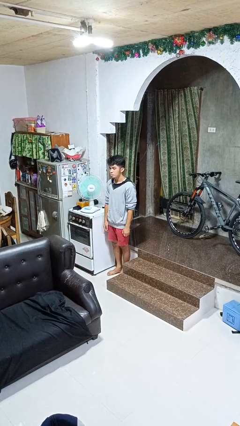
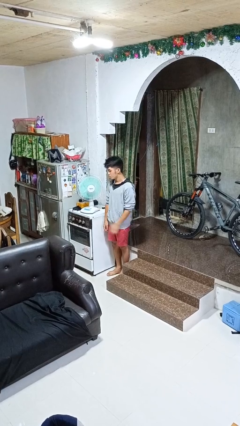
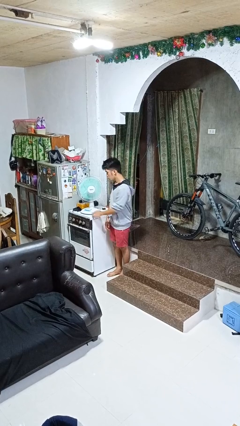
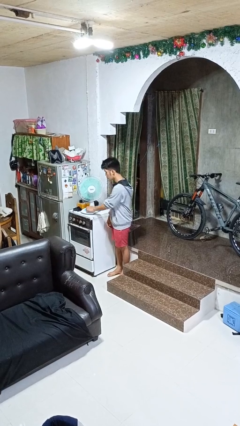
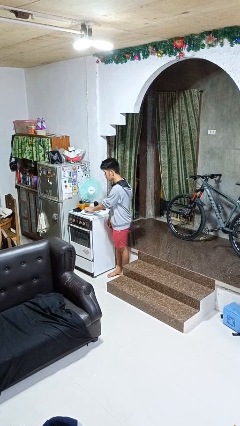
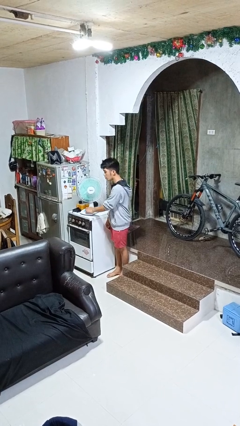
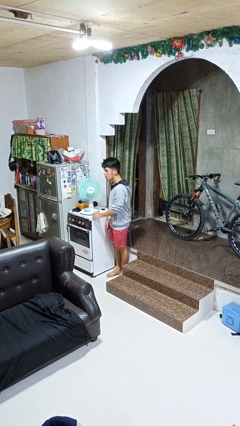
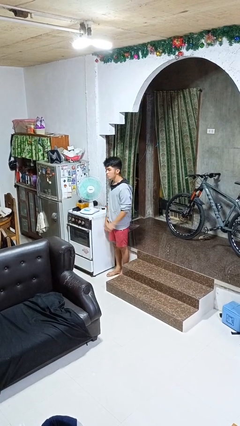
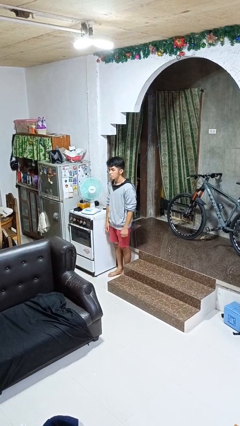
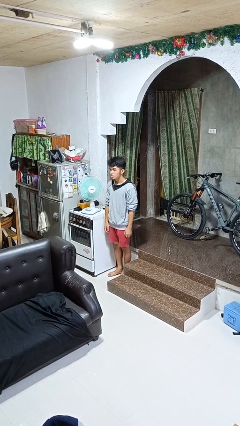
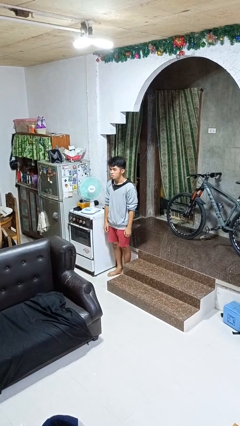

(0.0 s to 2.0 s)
person turns off fan

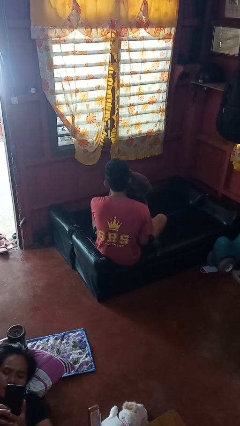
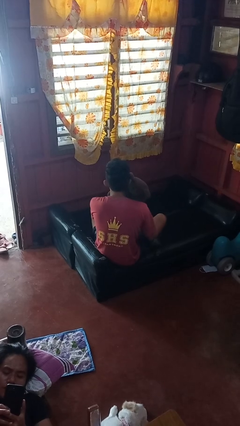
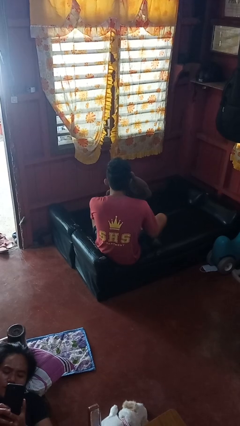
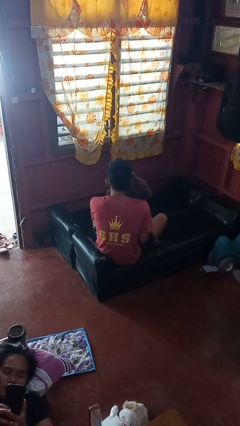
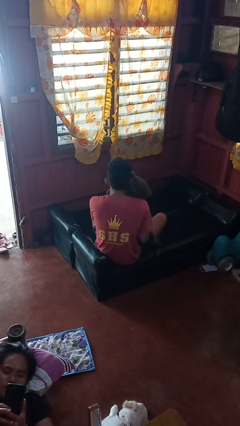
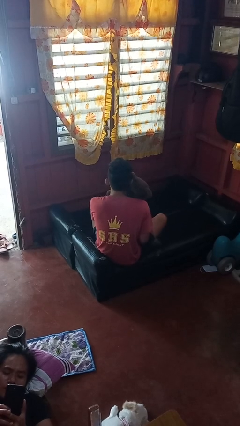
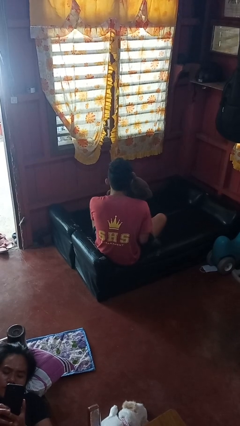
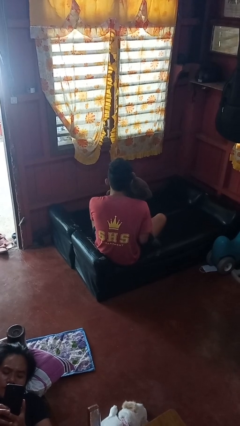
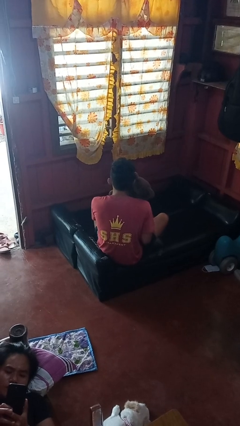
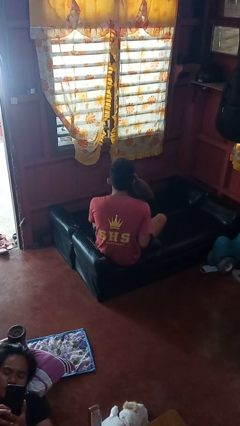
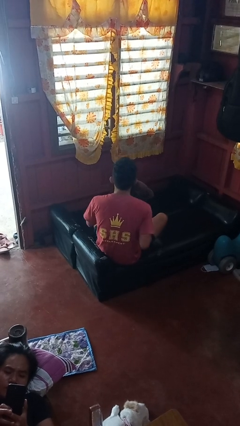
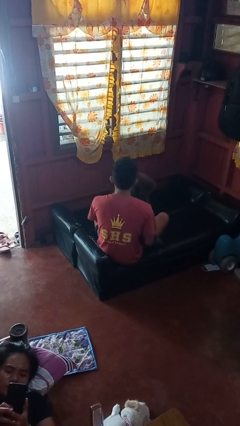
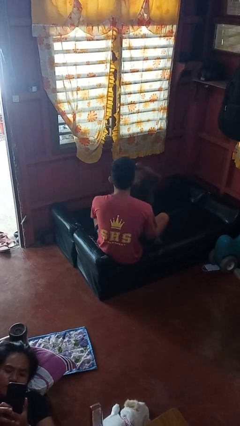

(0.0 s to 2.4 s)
person hugs stuffed animal

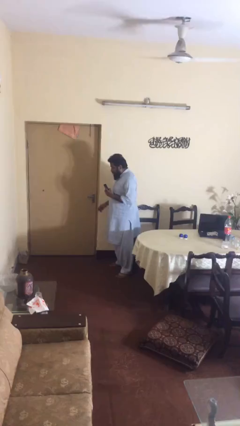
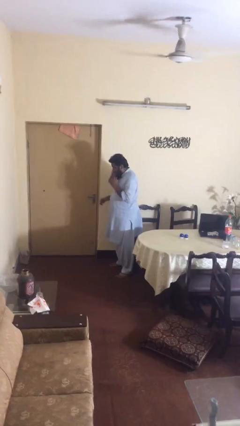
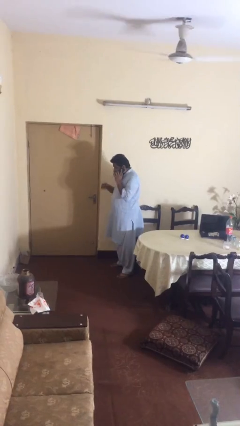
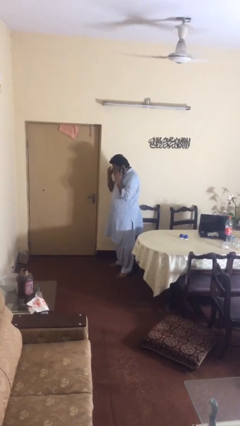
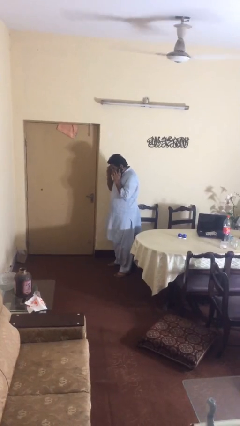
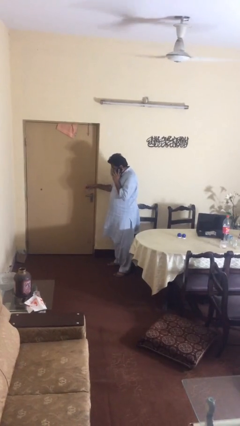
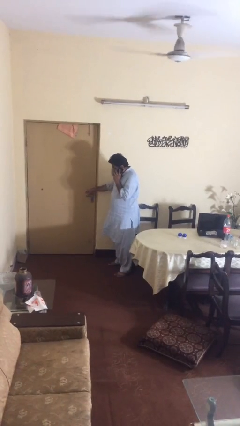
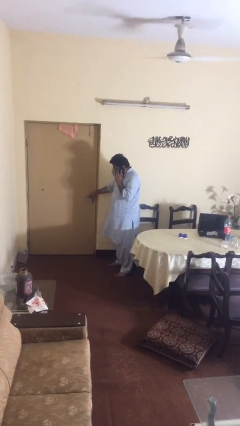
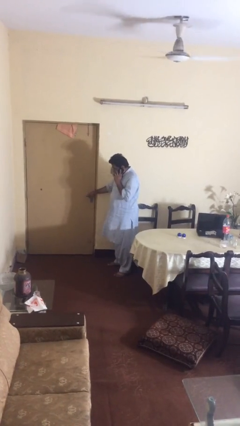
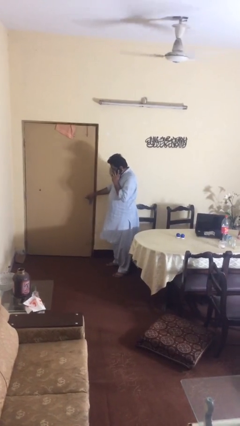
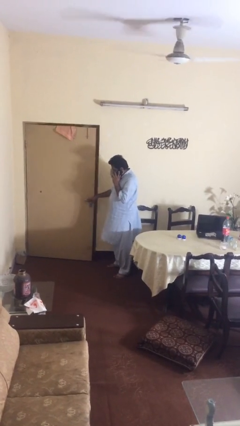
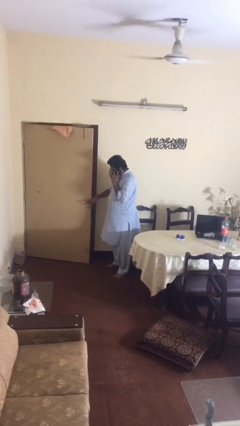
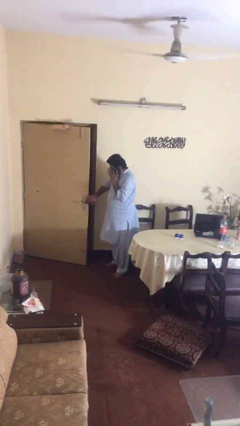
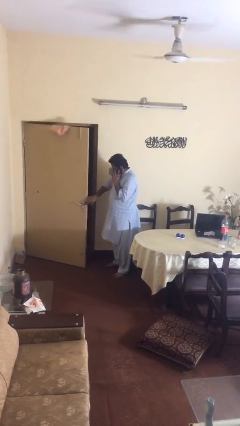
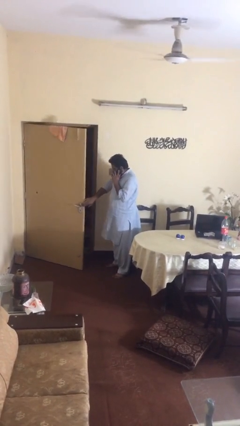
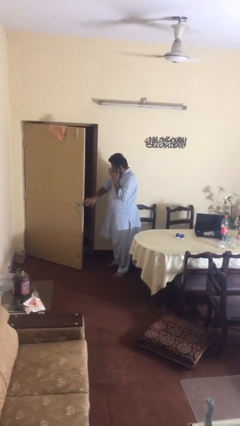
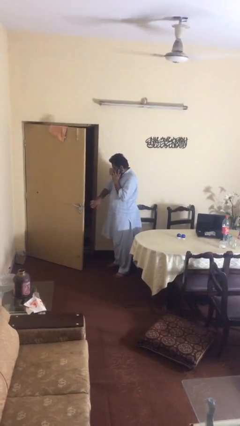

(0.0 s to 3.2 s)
person opens facility door

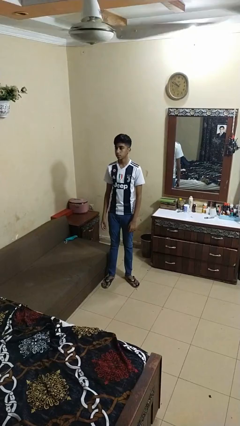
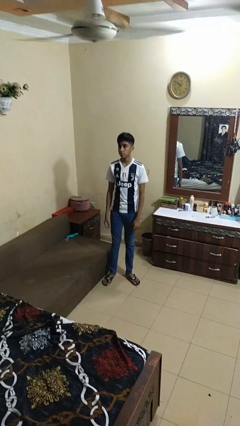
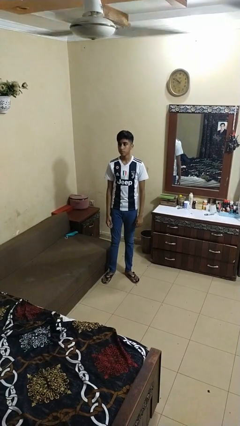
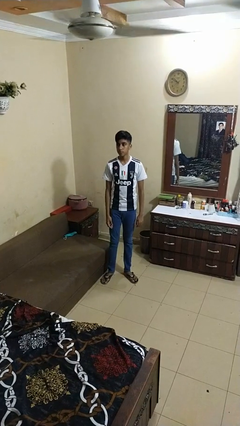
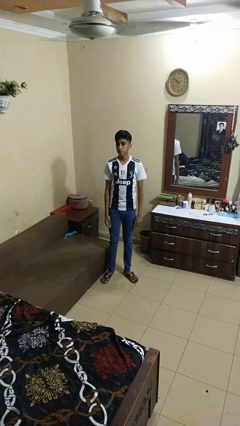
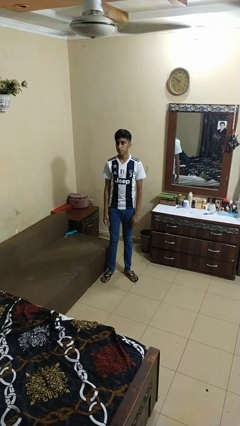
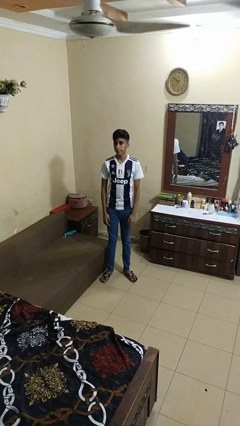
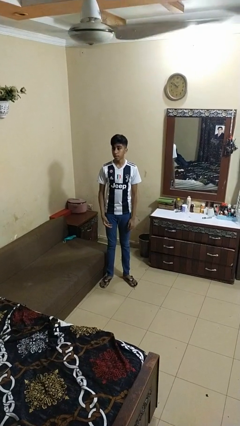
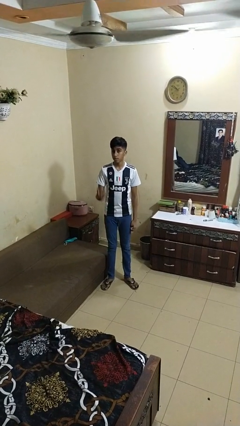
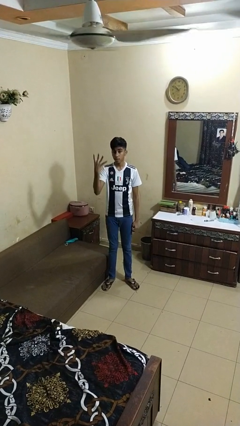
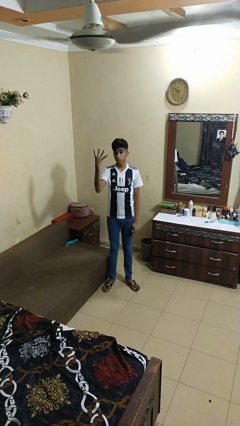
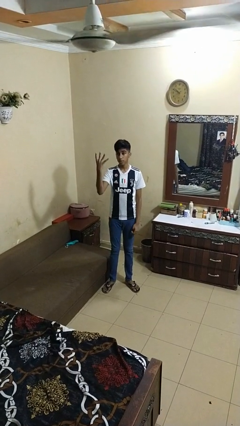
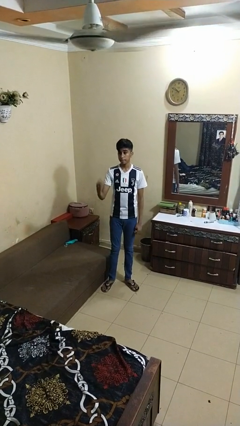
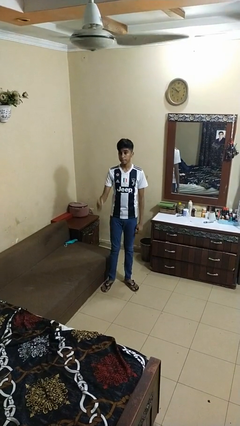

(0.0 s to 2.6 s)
person gestures number four

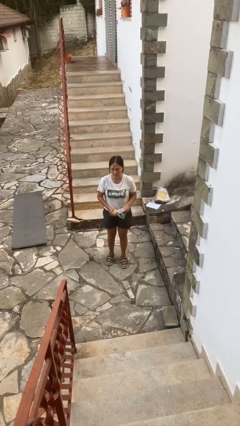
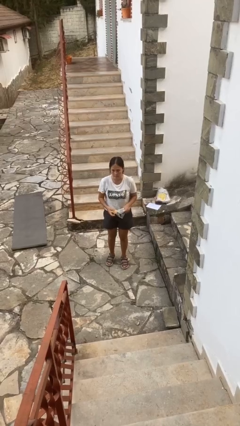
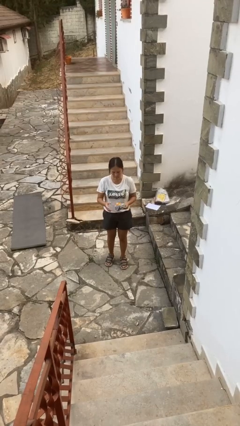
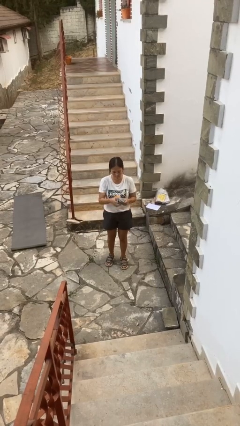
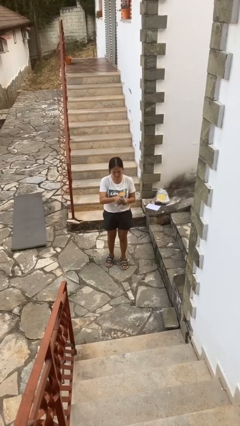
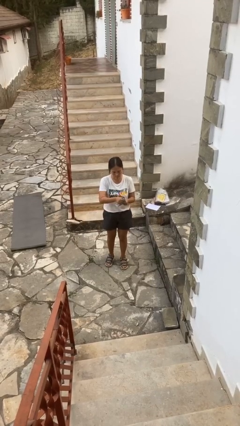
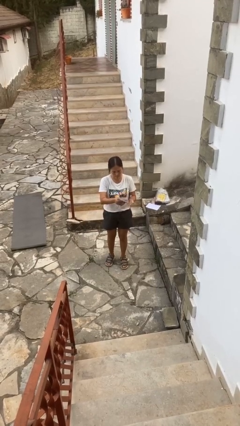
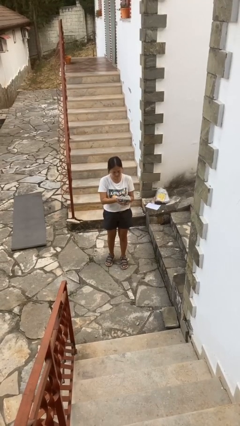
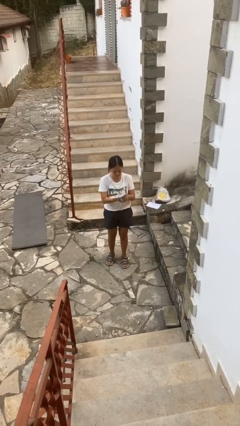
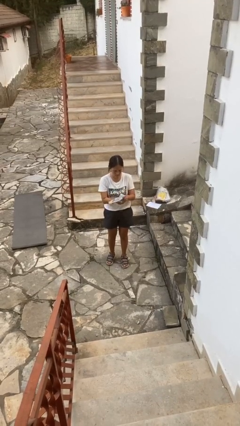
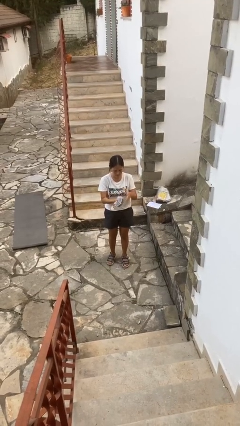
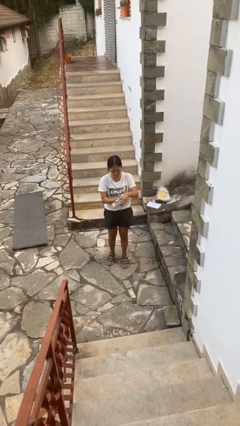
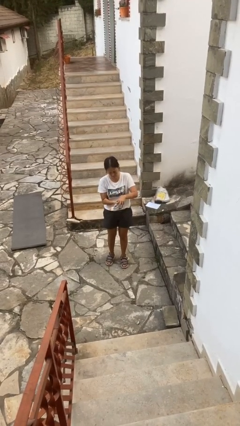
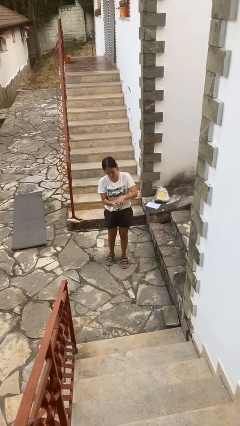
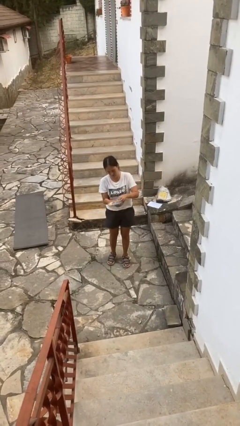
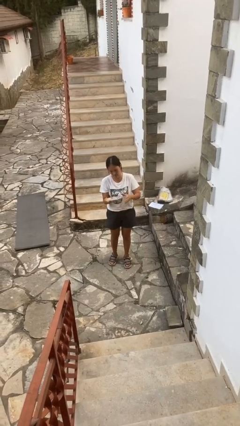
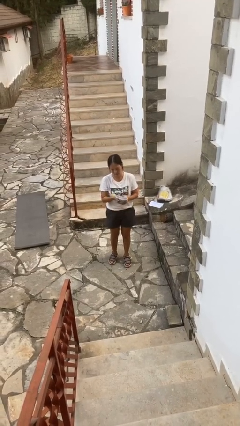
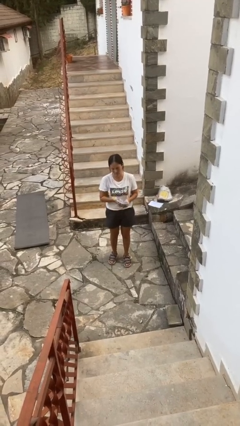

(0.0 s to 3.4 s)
person squeezes object

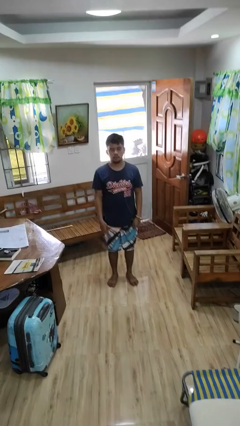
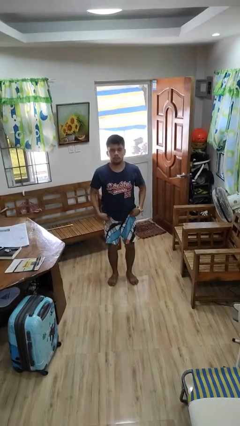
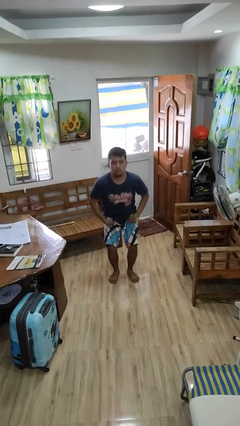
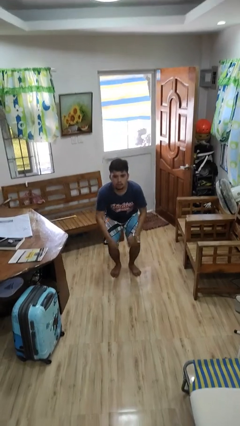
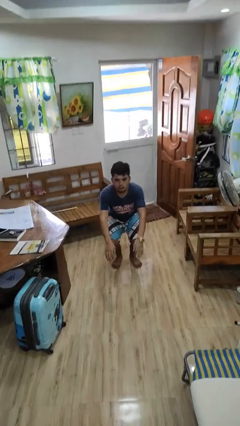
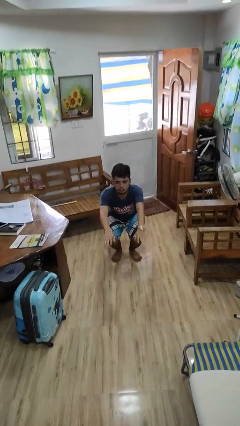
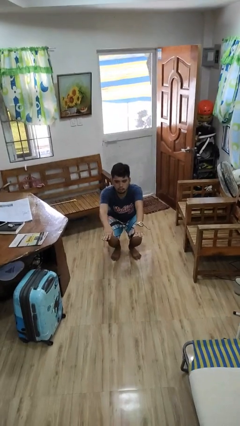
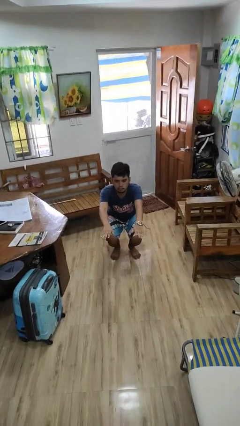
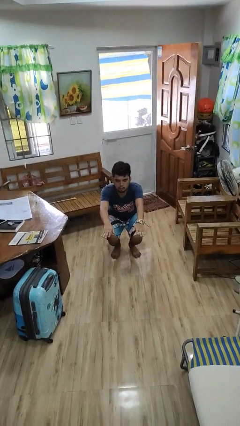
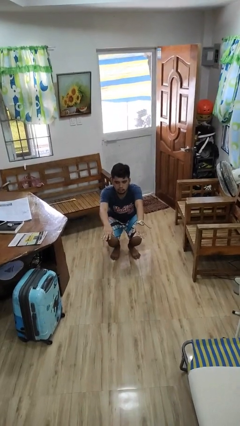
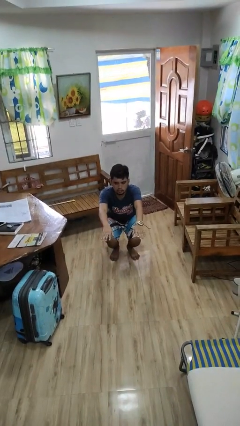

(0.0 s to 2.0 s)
person squats

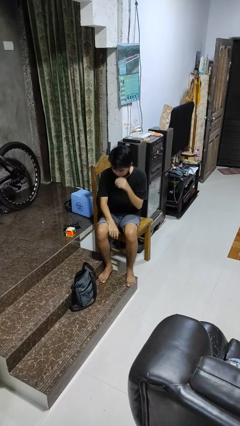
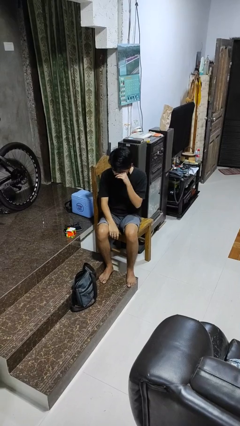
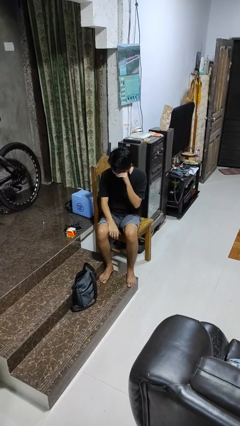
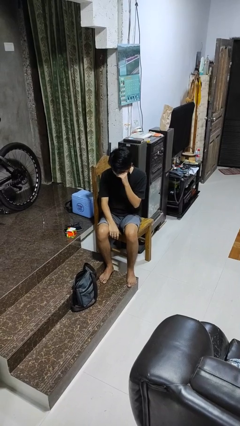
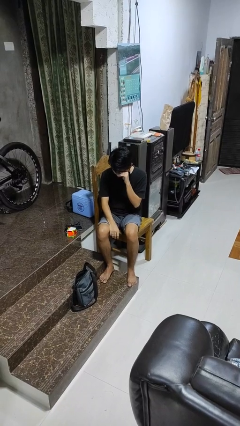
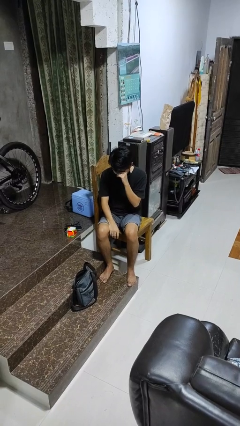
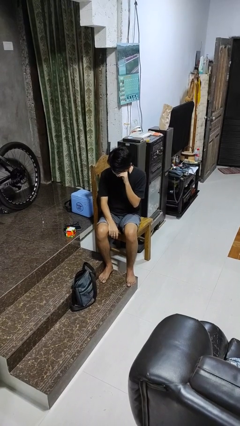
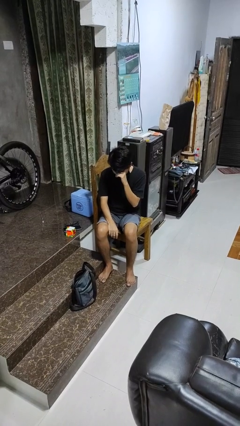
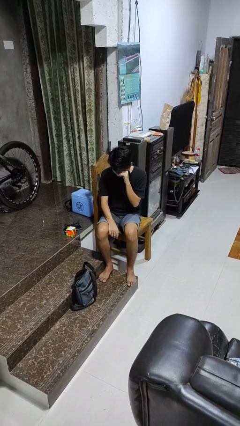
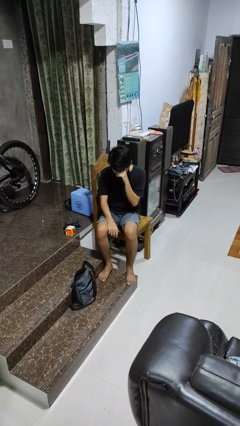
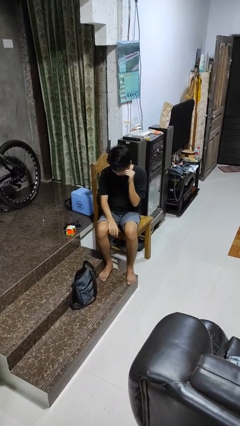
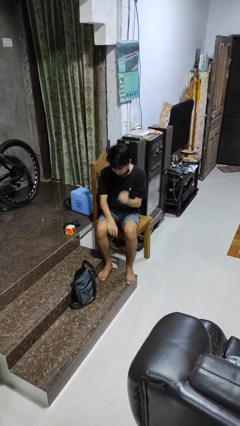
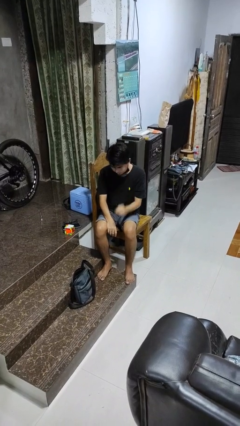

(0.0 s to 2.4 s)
person rubs eyes
